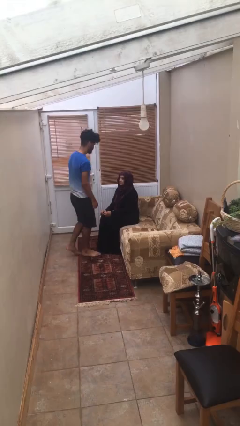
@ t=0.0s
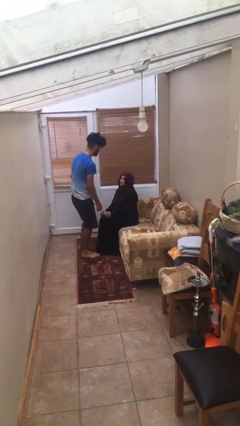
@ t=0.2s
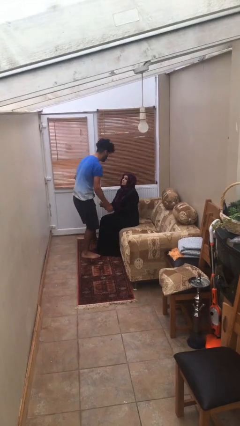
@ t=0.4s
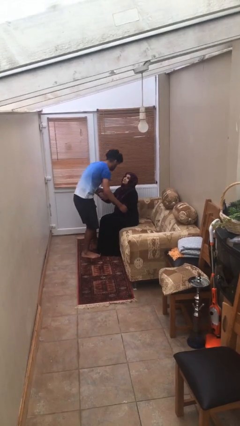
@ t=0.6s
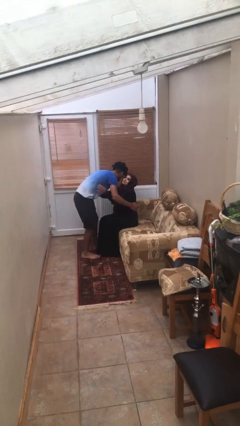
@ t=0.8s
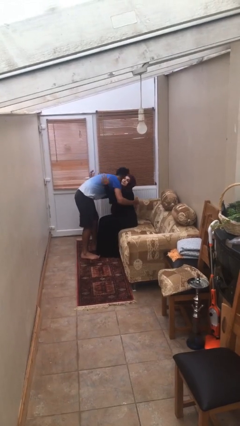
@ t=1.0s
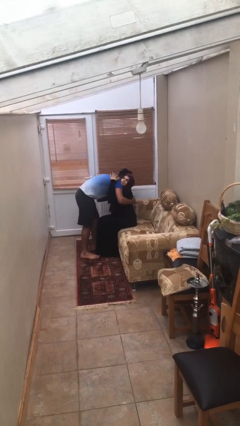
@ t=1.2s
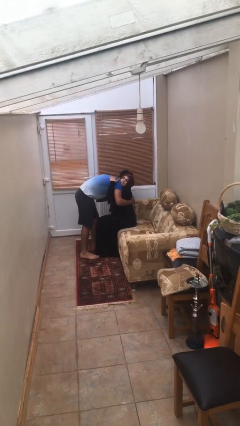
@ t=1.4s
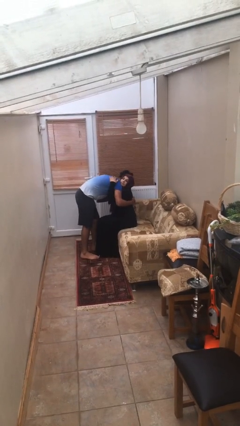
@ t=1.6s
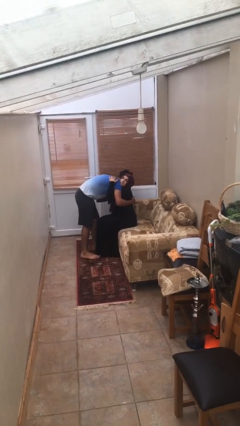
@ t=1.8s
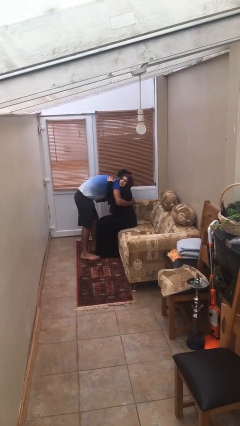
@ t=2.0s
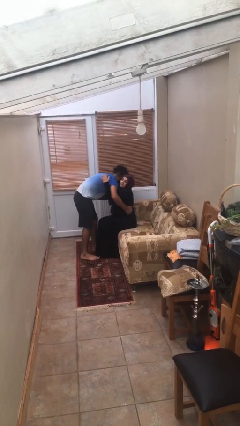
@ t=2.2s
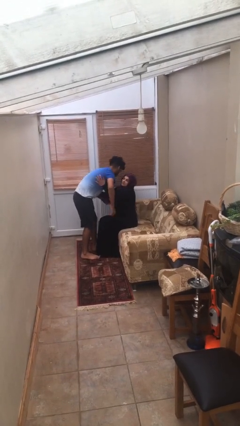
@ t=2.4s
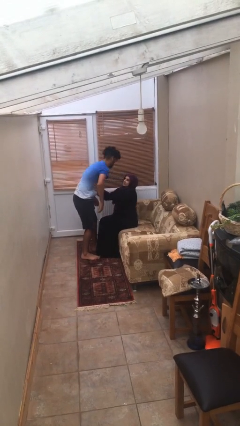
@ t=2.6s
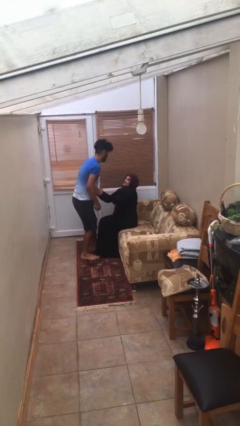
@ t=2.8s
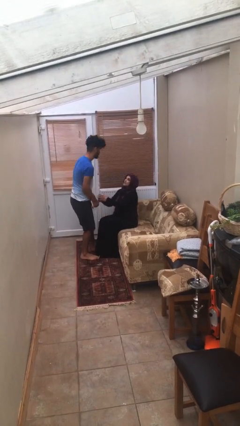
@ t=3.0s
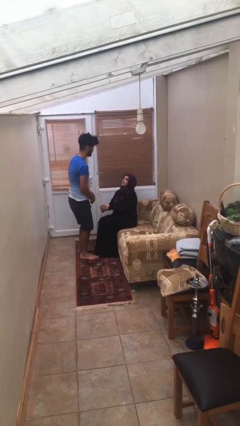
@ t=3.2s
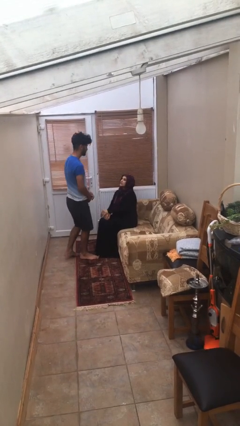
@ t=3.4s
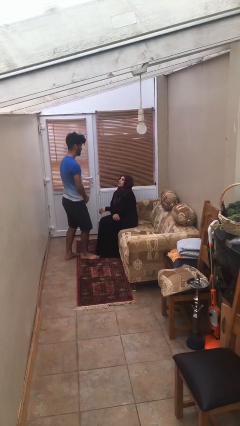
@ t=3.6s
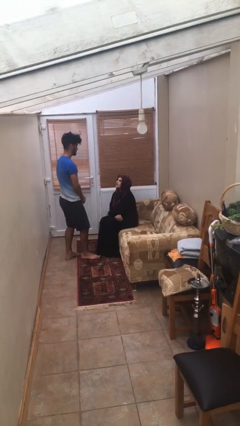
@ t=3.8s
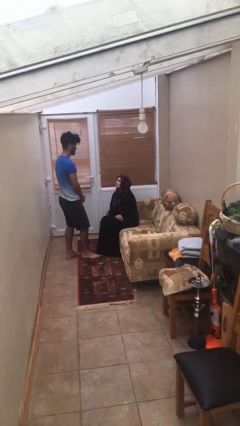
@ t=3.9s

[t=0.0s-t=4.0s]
person embraces person

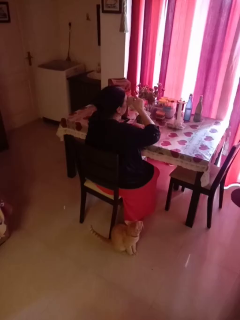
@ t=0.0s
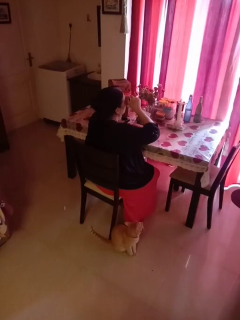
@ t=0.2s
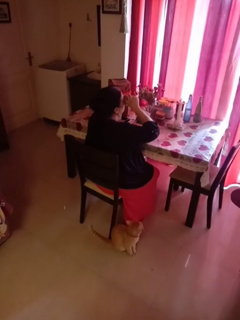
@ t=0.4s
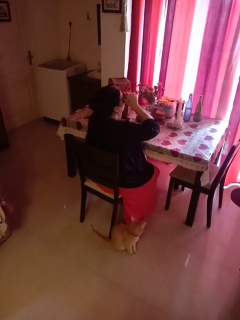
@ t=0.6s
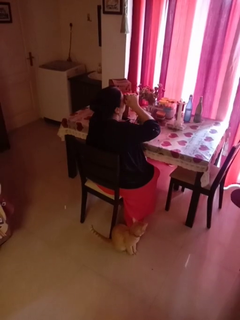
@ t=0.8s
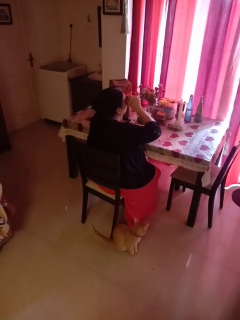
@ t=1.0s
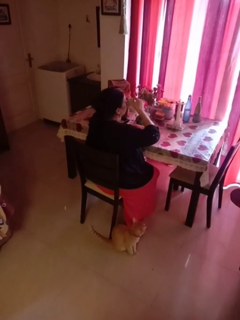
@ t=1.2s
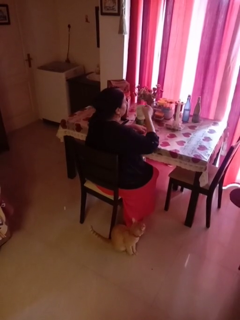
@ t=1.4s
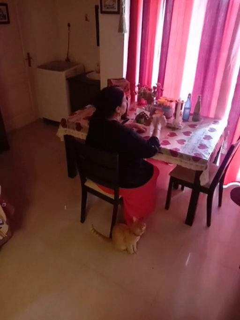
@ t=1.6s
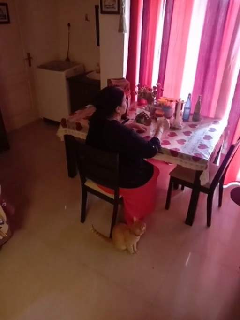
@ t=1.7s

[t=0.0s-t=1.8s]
person drinks from mug

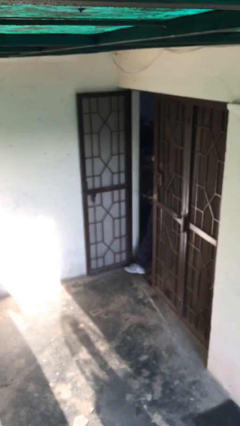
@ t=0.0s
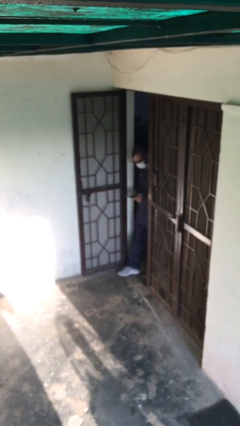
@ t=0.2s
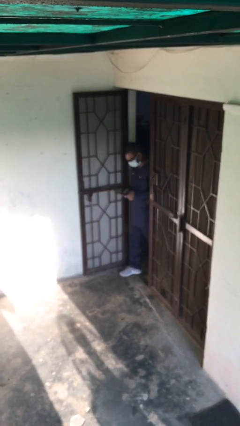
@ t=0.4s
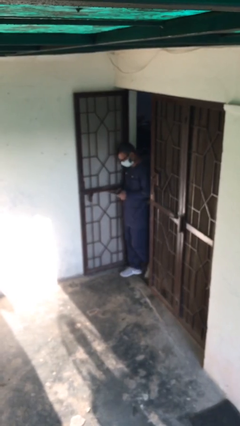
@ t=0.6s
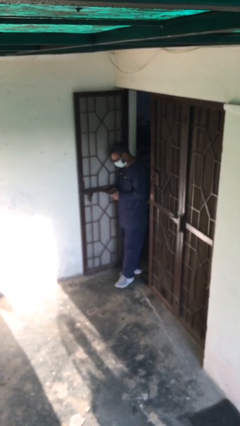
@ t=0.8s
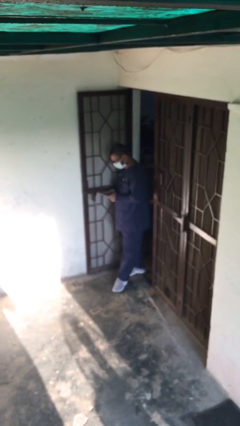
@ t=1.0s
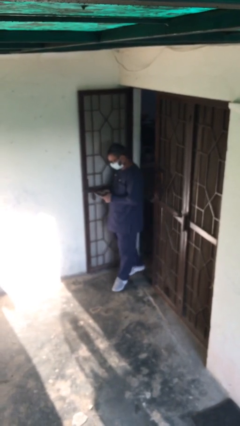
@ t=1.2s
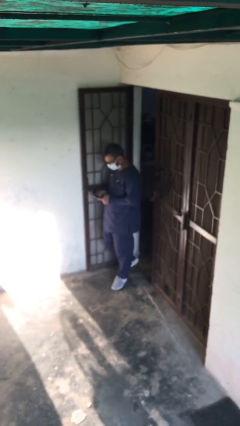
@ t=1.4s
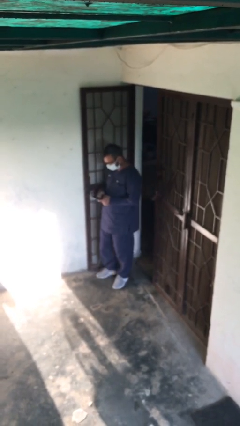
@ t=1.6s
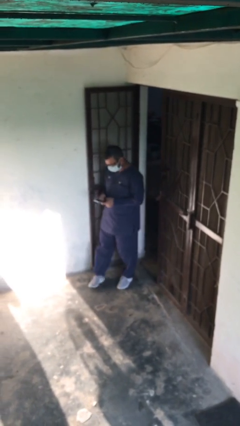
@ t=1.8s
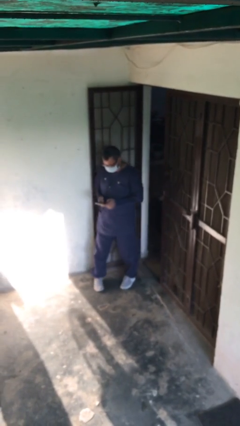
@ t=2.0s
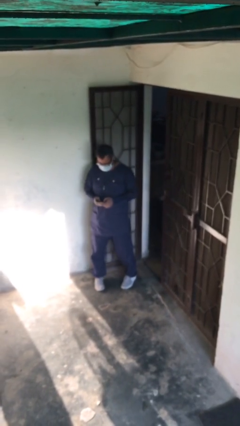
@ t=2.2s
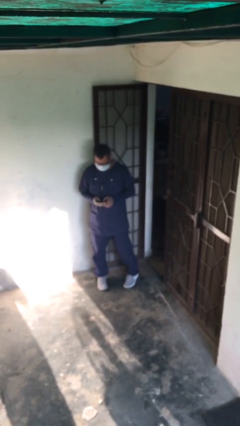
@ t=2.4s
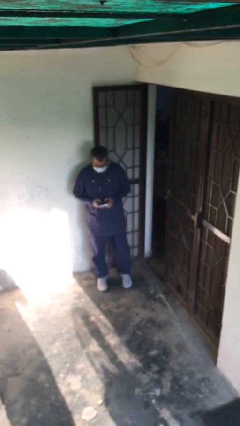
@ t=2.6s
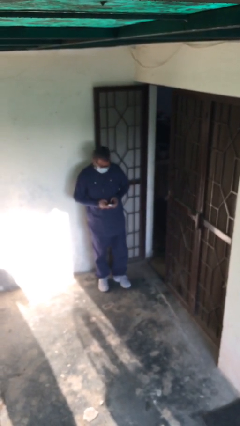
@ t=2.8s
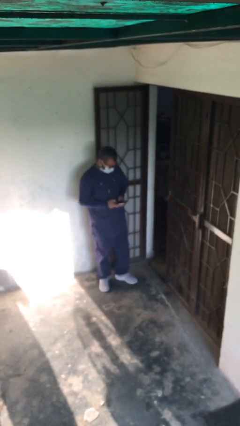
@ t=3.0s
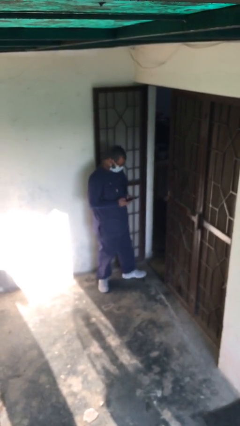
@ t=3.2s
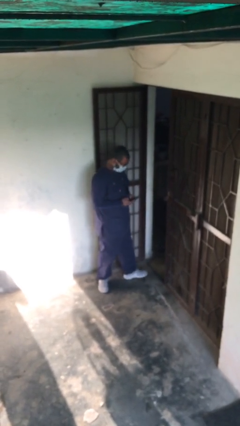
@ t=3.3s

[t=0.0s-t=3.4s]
person enters scene through structure

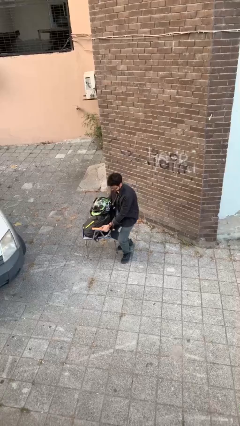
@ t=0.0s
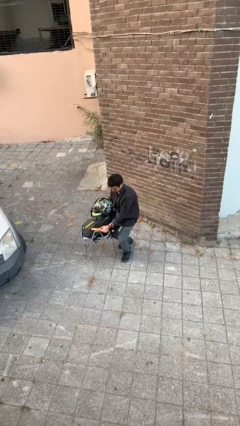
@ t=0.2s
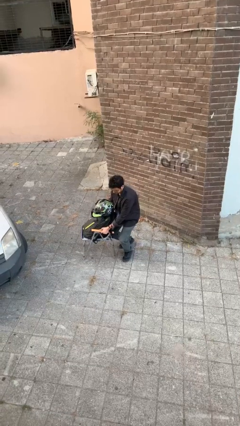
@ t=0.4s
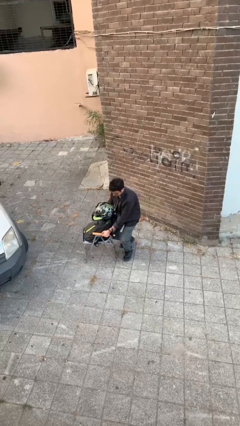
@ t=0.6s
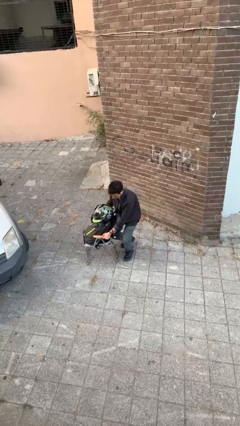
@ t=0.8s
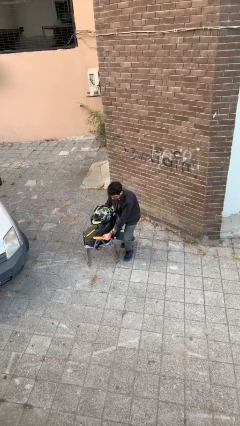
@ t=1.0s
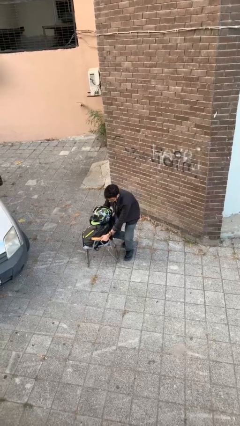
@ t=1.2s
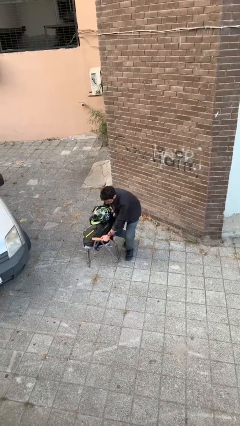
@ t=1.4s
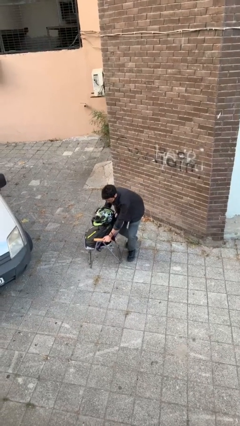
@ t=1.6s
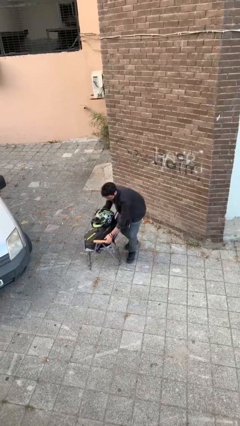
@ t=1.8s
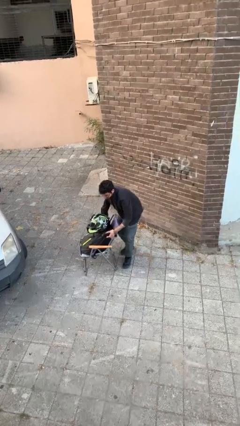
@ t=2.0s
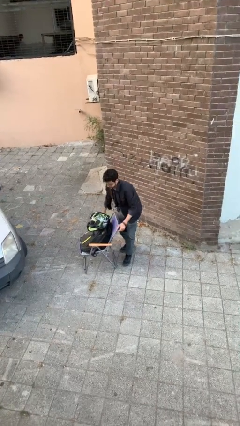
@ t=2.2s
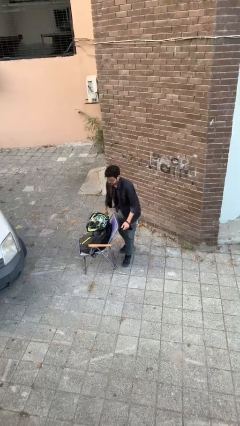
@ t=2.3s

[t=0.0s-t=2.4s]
person puts down object on floor

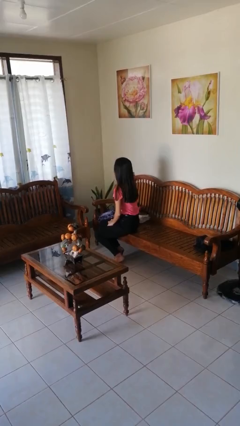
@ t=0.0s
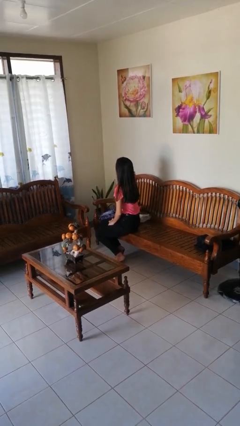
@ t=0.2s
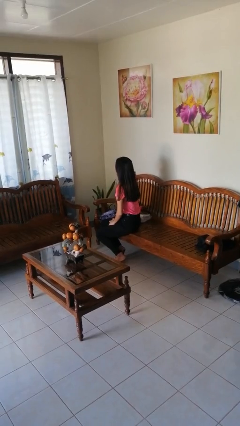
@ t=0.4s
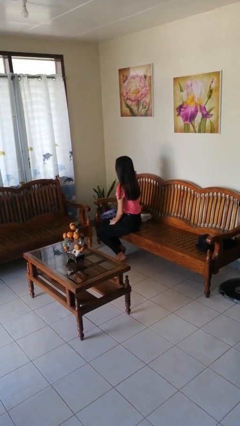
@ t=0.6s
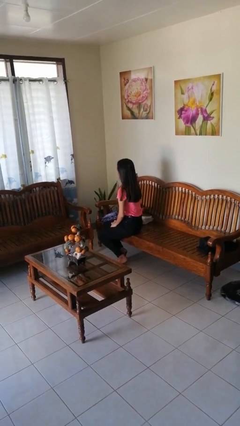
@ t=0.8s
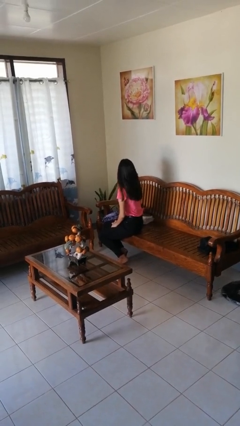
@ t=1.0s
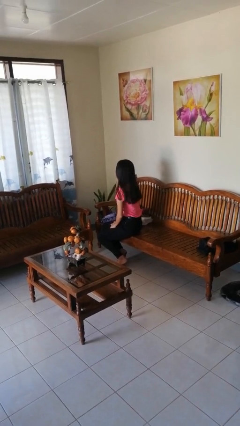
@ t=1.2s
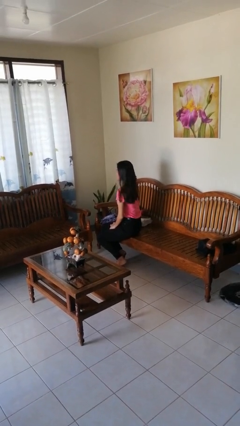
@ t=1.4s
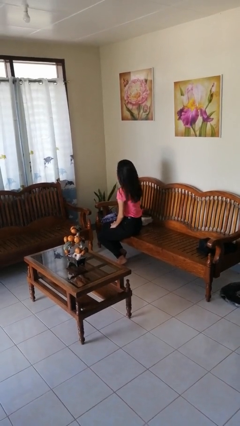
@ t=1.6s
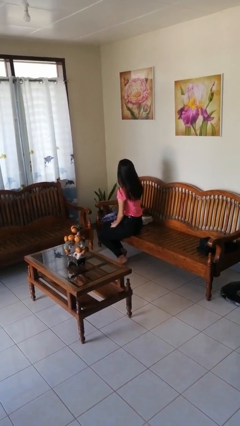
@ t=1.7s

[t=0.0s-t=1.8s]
person shakes head

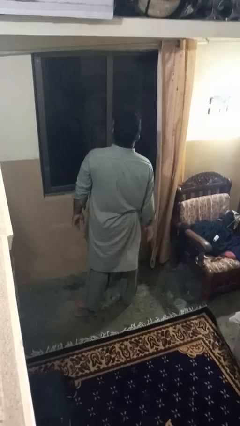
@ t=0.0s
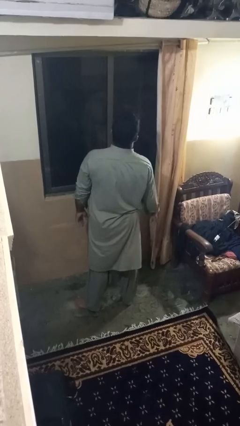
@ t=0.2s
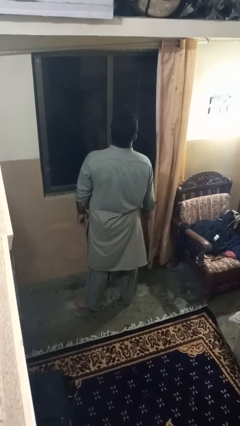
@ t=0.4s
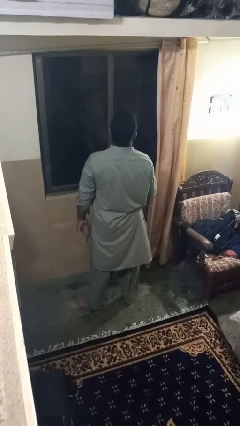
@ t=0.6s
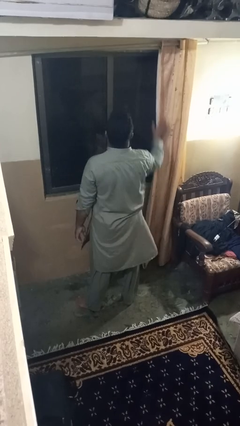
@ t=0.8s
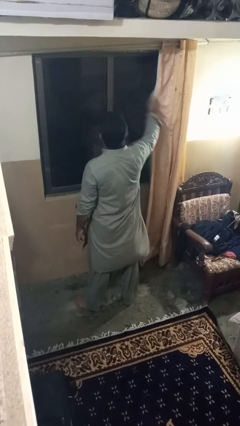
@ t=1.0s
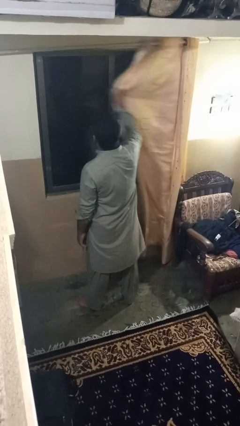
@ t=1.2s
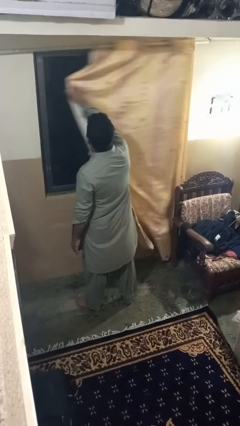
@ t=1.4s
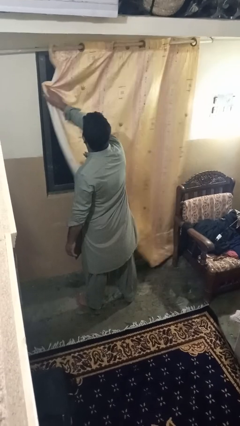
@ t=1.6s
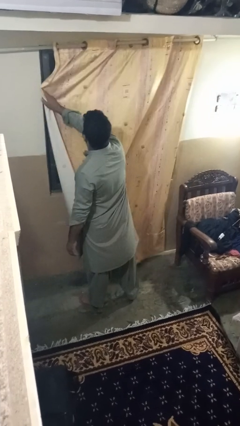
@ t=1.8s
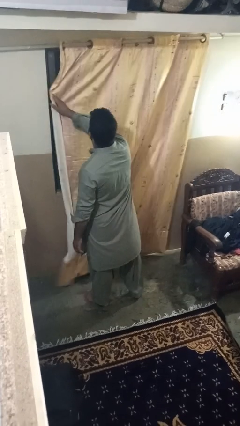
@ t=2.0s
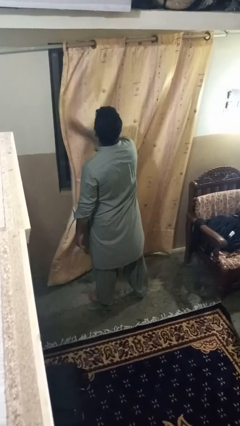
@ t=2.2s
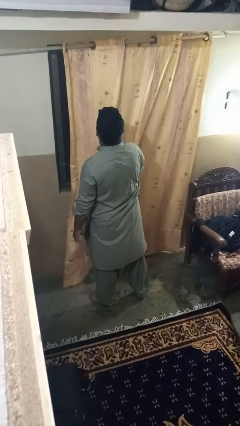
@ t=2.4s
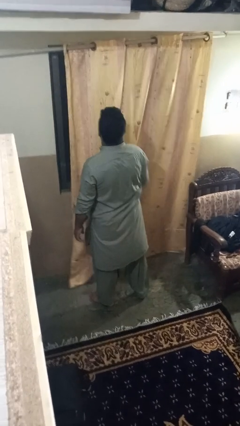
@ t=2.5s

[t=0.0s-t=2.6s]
person closes curtains

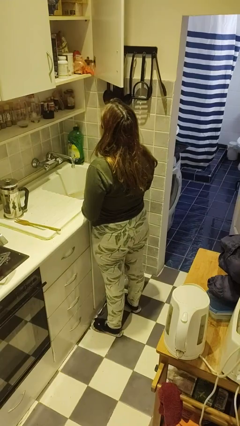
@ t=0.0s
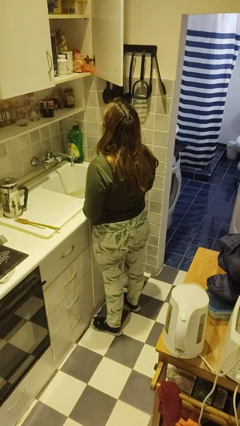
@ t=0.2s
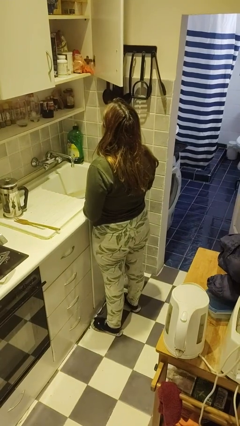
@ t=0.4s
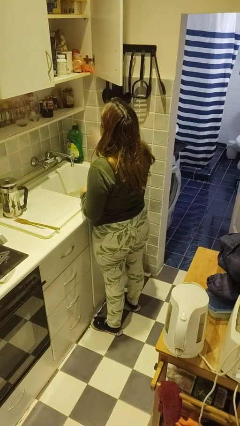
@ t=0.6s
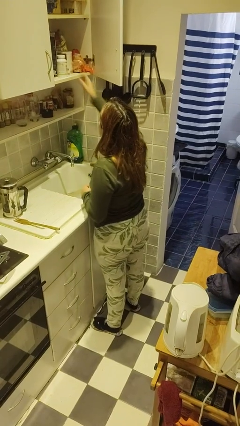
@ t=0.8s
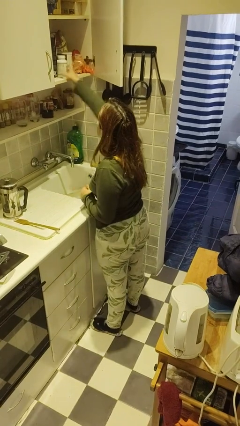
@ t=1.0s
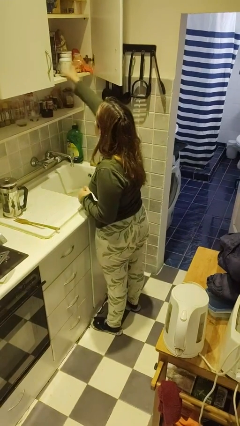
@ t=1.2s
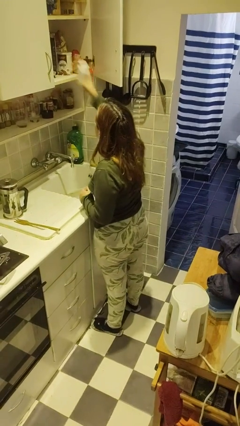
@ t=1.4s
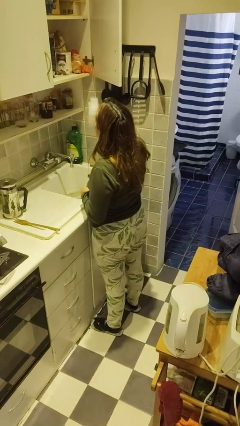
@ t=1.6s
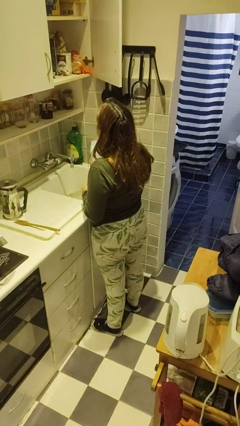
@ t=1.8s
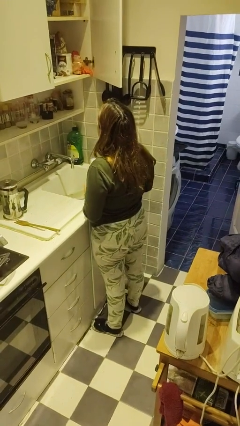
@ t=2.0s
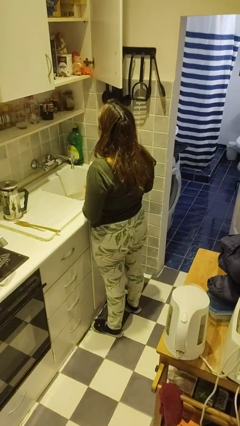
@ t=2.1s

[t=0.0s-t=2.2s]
person takes object from cabinet
